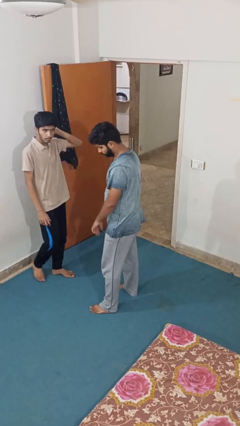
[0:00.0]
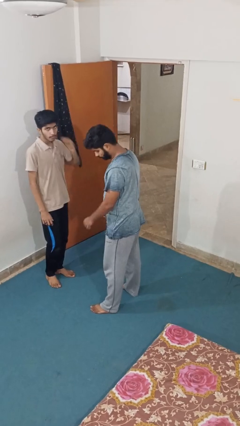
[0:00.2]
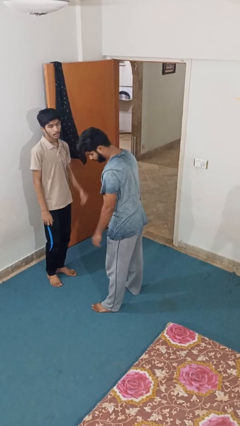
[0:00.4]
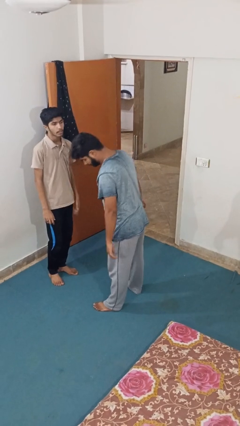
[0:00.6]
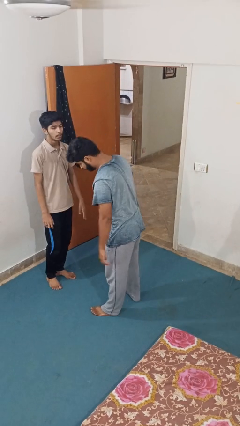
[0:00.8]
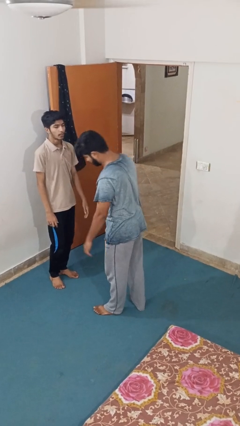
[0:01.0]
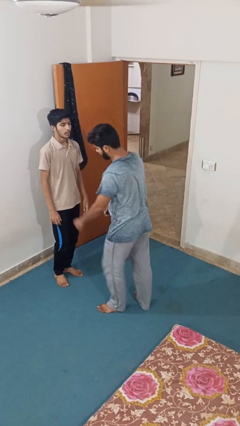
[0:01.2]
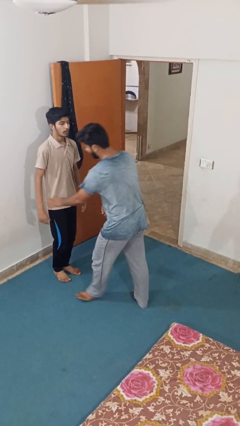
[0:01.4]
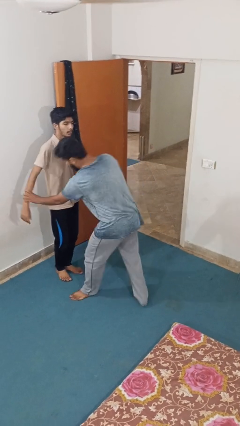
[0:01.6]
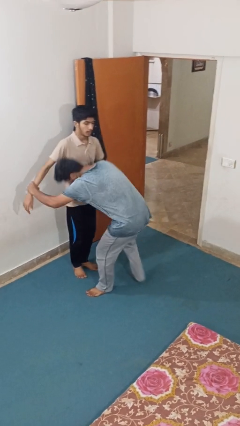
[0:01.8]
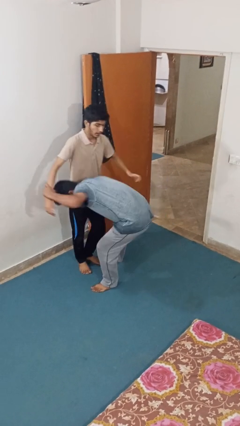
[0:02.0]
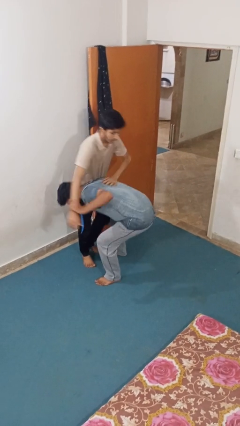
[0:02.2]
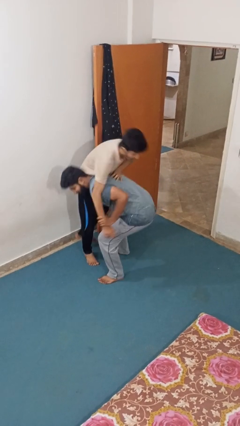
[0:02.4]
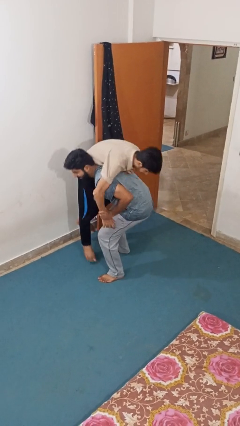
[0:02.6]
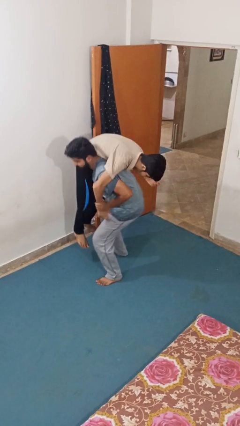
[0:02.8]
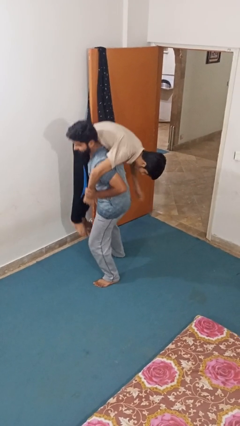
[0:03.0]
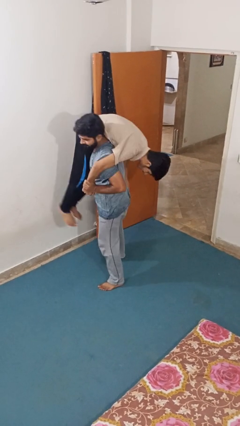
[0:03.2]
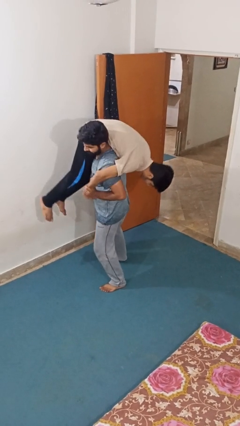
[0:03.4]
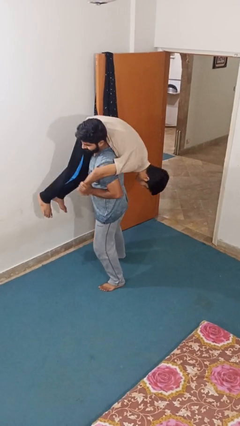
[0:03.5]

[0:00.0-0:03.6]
person carries person over shoulder

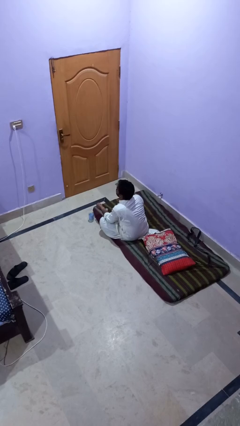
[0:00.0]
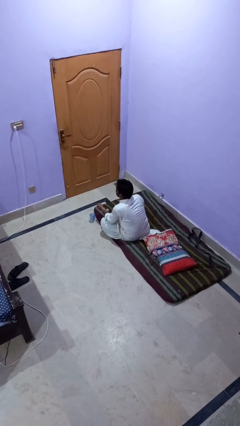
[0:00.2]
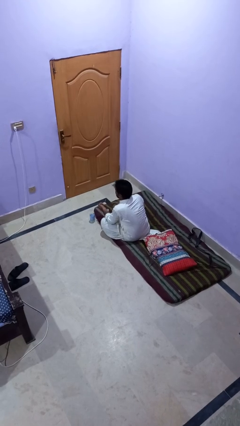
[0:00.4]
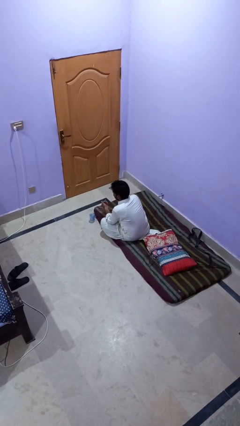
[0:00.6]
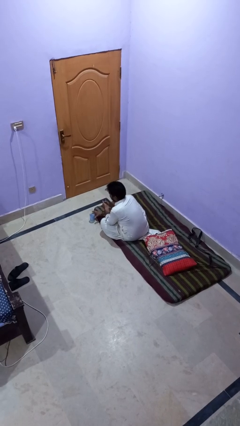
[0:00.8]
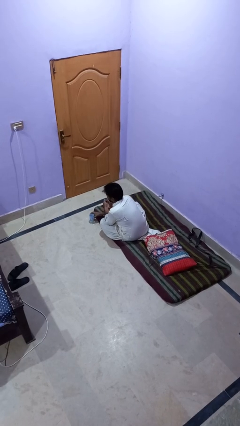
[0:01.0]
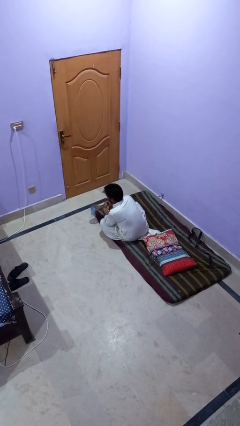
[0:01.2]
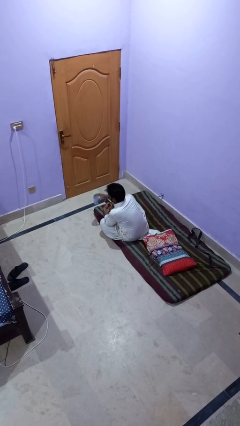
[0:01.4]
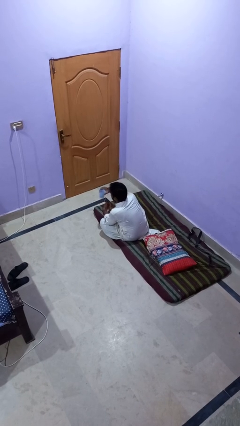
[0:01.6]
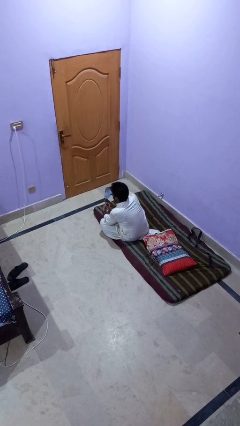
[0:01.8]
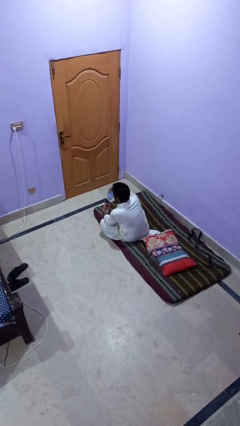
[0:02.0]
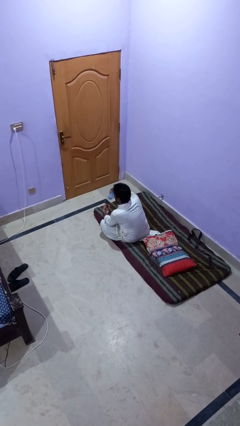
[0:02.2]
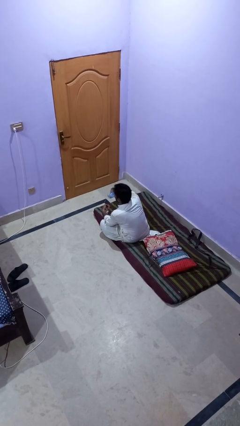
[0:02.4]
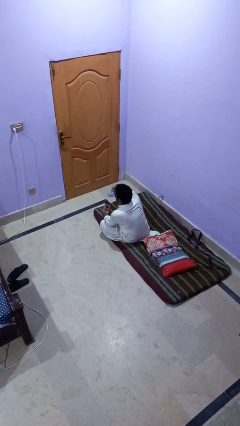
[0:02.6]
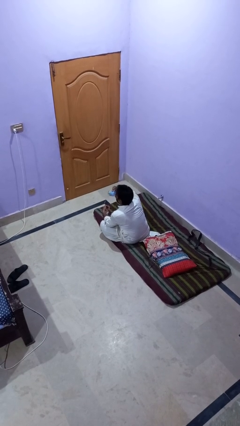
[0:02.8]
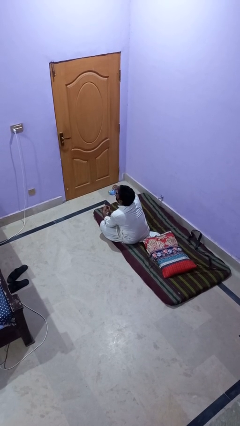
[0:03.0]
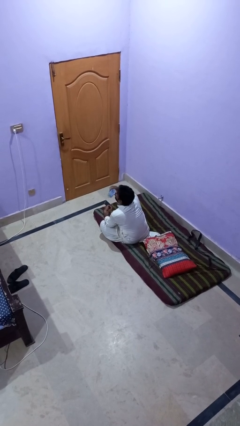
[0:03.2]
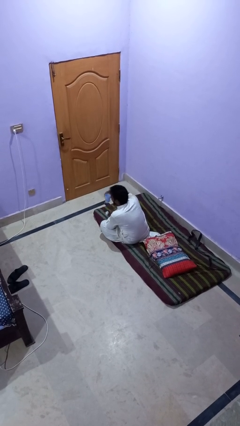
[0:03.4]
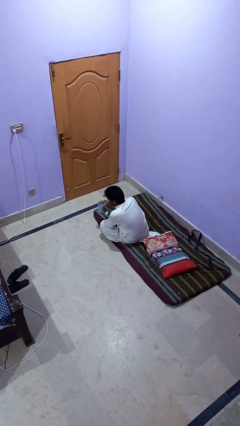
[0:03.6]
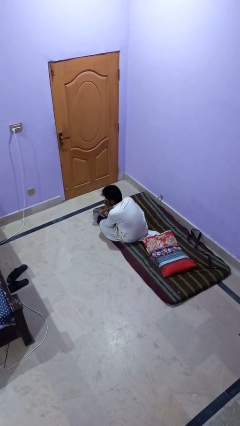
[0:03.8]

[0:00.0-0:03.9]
person drinks from cup

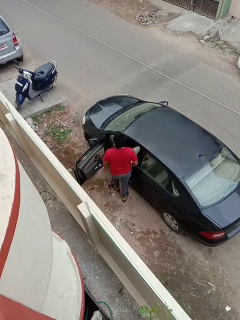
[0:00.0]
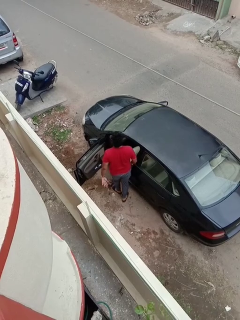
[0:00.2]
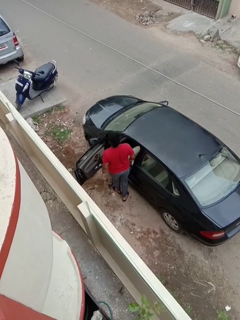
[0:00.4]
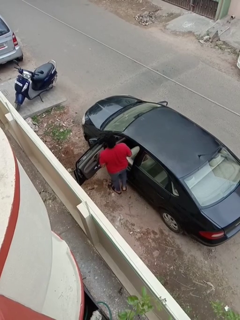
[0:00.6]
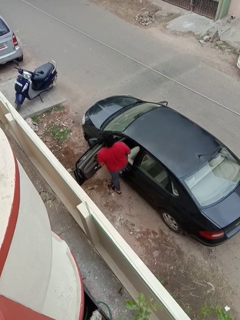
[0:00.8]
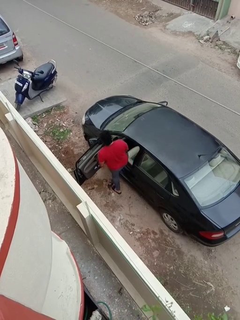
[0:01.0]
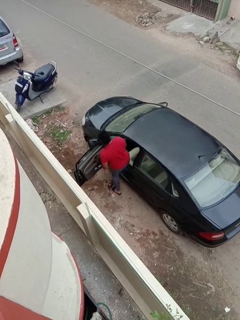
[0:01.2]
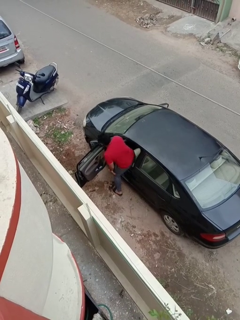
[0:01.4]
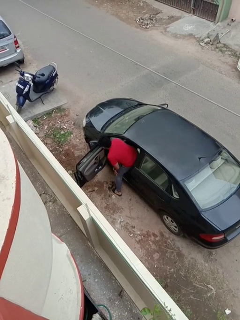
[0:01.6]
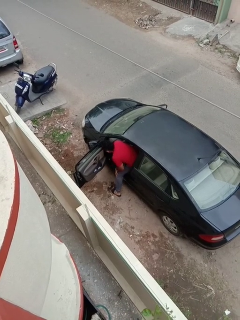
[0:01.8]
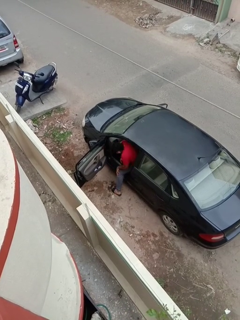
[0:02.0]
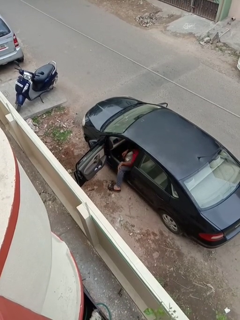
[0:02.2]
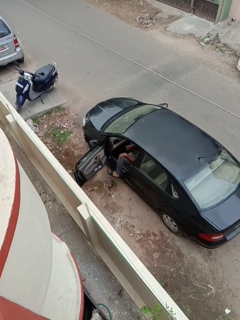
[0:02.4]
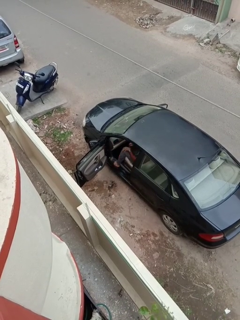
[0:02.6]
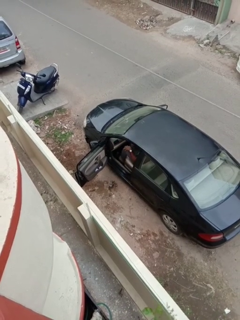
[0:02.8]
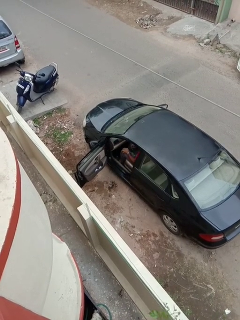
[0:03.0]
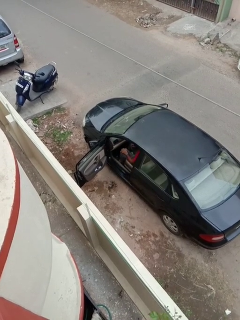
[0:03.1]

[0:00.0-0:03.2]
person enters car

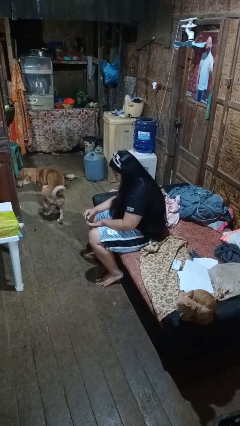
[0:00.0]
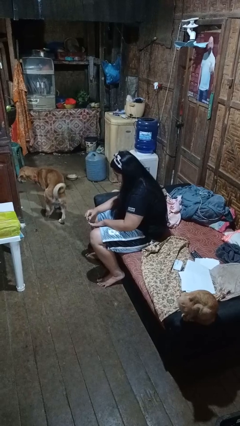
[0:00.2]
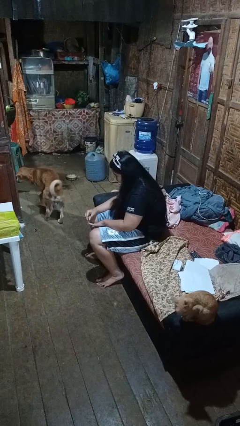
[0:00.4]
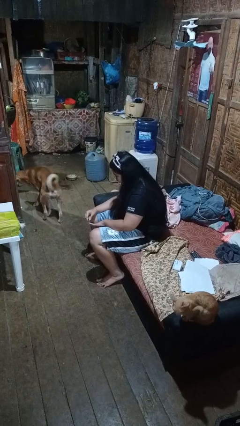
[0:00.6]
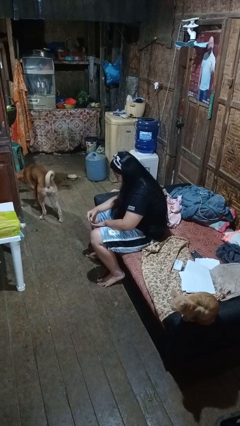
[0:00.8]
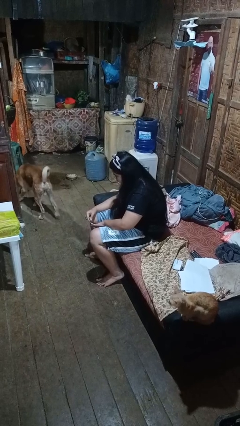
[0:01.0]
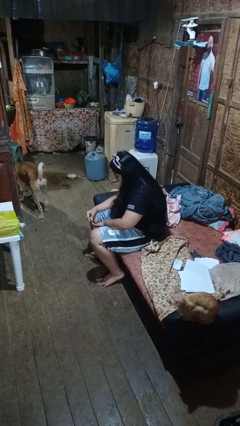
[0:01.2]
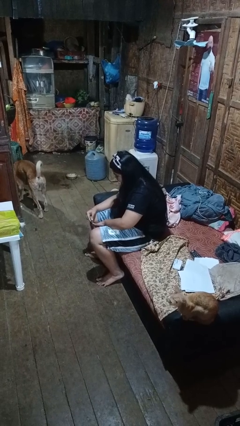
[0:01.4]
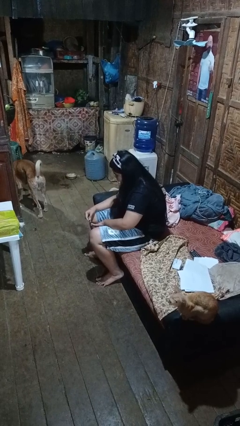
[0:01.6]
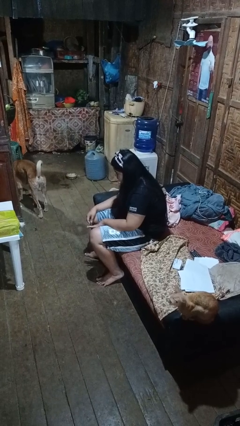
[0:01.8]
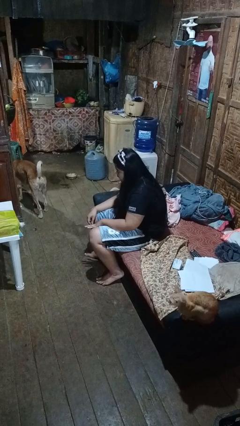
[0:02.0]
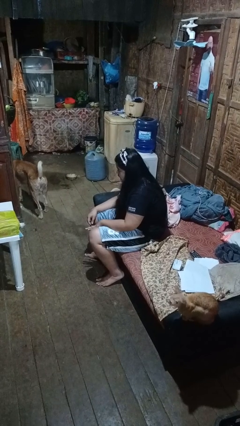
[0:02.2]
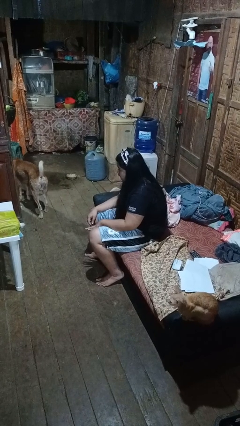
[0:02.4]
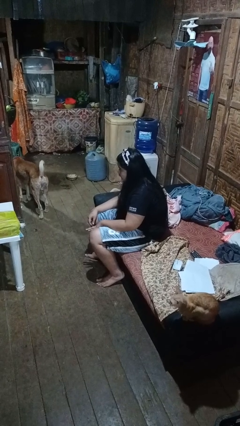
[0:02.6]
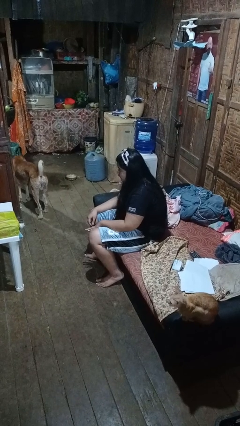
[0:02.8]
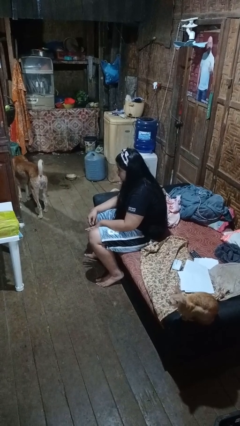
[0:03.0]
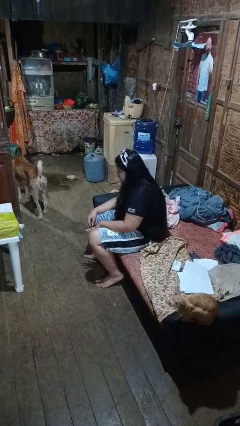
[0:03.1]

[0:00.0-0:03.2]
person clips fingernails

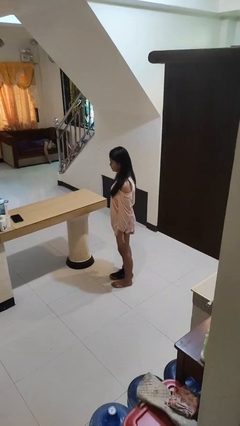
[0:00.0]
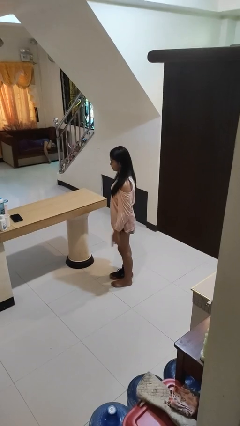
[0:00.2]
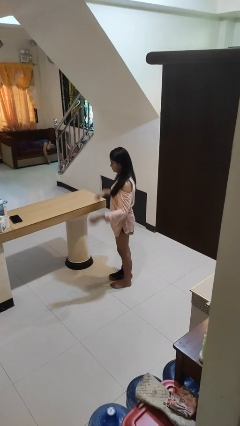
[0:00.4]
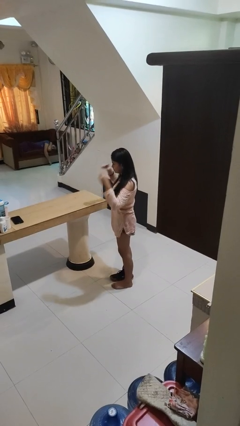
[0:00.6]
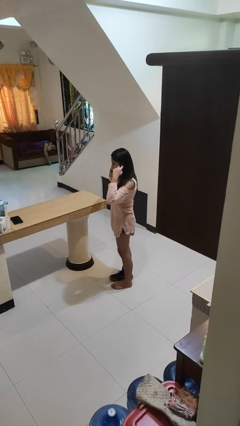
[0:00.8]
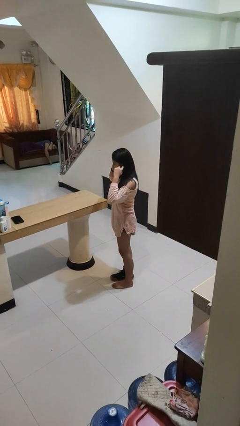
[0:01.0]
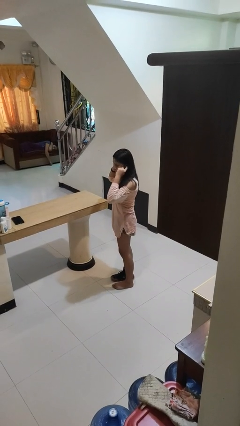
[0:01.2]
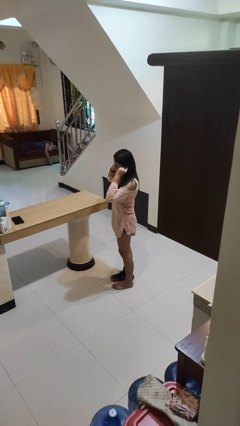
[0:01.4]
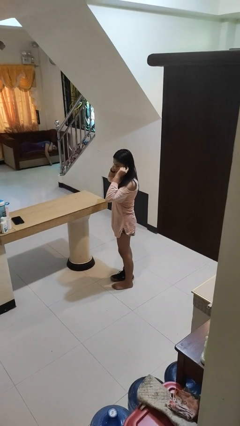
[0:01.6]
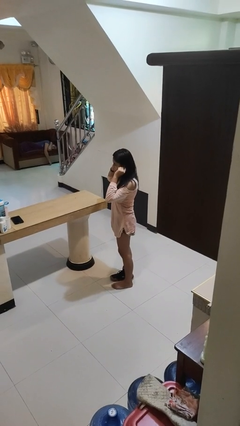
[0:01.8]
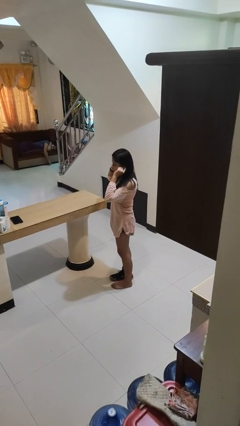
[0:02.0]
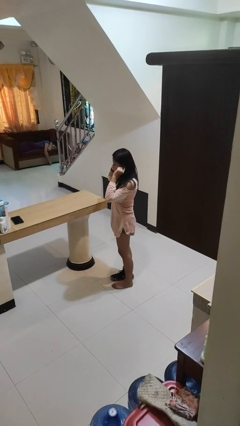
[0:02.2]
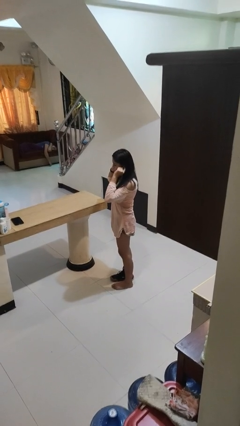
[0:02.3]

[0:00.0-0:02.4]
person puts fingers in ear

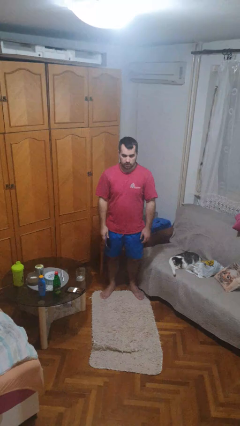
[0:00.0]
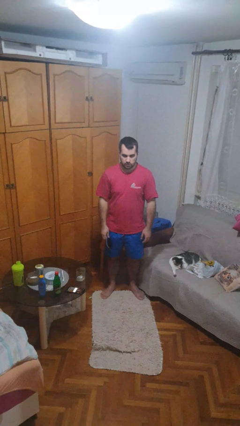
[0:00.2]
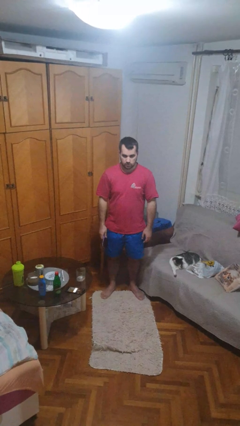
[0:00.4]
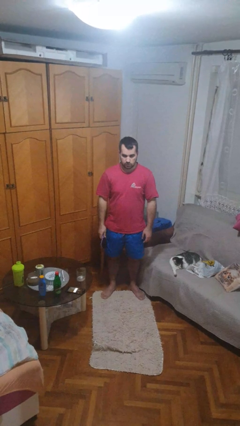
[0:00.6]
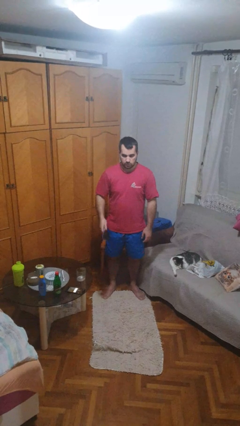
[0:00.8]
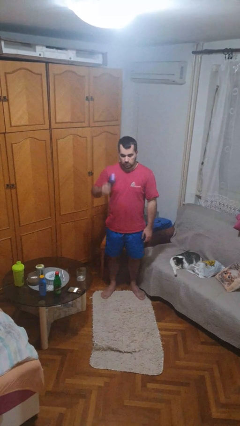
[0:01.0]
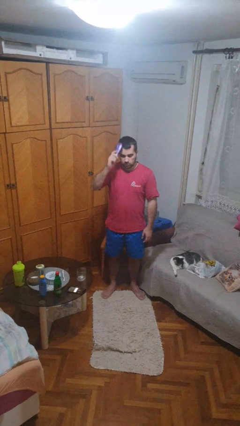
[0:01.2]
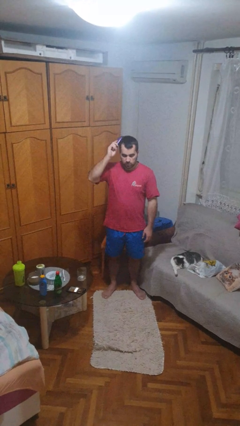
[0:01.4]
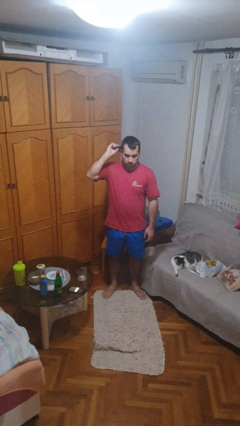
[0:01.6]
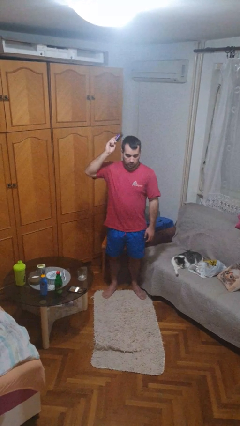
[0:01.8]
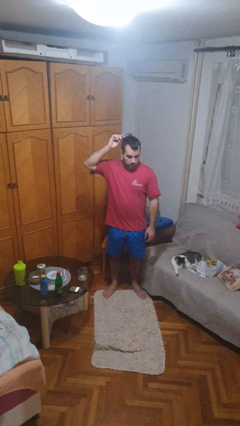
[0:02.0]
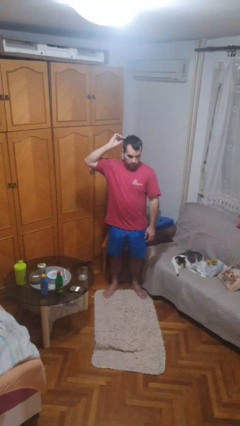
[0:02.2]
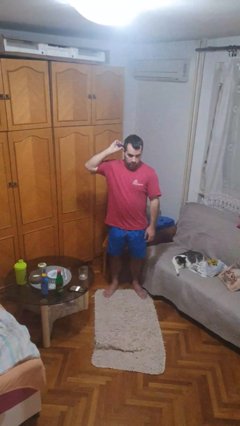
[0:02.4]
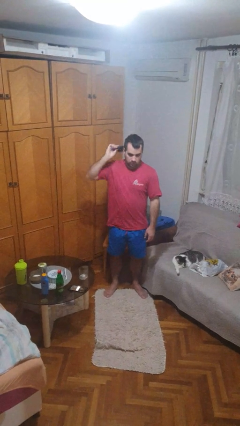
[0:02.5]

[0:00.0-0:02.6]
person brushes hair
